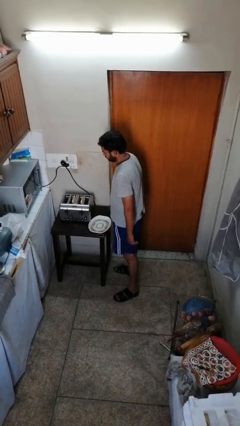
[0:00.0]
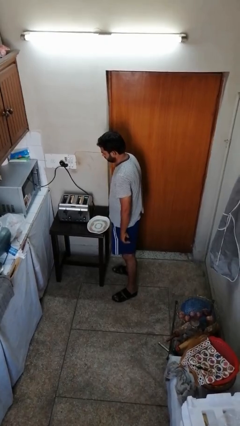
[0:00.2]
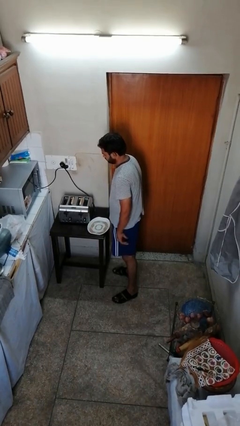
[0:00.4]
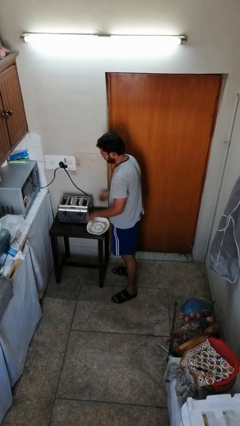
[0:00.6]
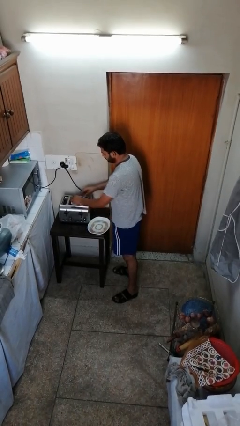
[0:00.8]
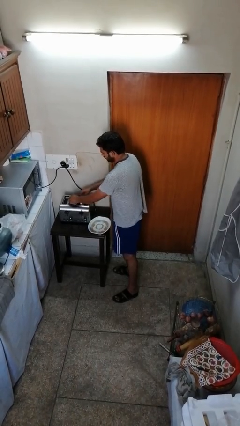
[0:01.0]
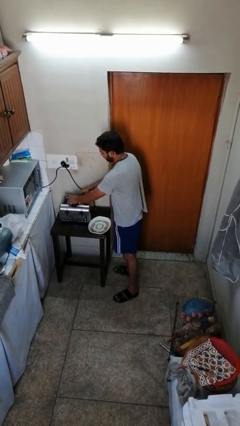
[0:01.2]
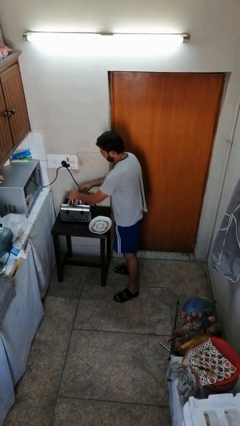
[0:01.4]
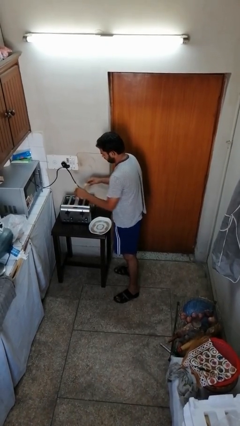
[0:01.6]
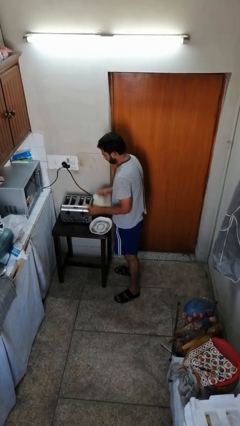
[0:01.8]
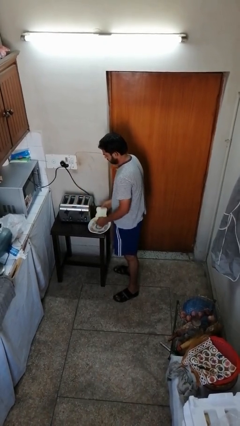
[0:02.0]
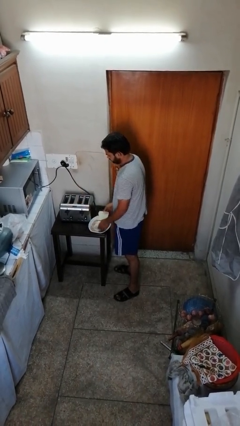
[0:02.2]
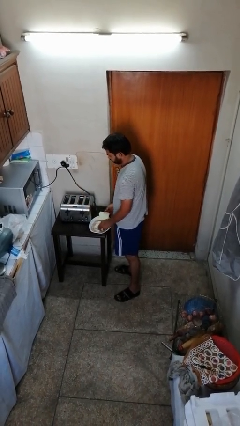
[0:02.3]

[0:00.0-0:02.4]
person takes object from toaster

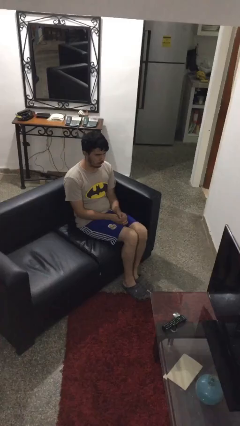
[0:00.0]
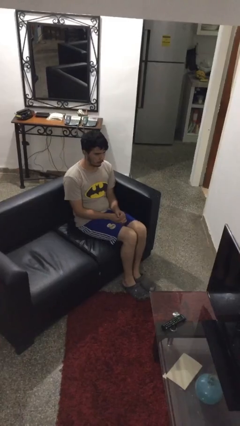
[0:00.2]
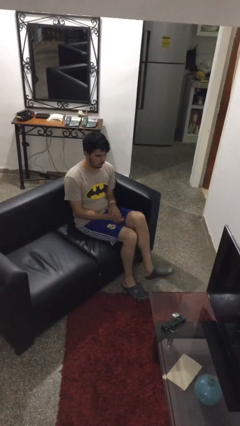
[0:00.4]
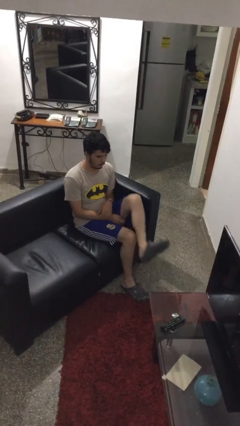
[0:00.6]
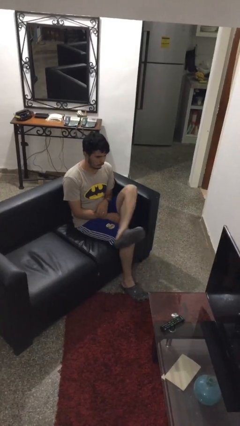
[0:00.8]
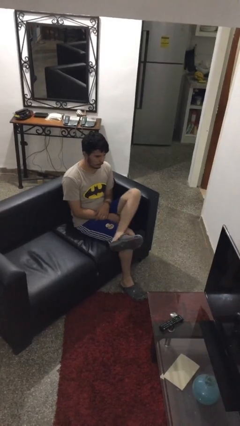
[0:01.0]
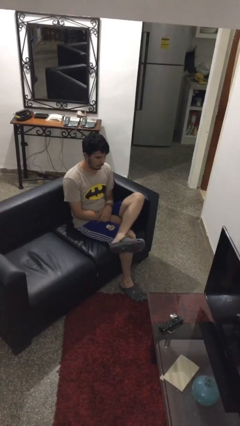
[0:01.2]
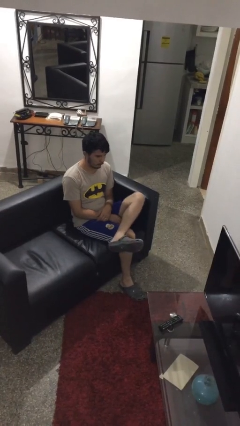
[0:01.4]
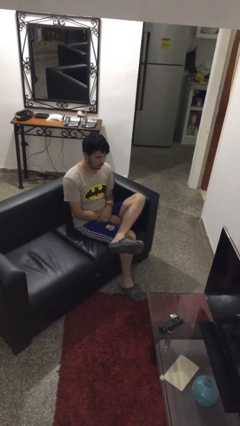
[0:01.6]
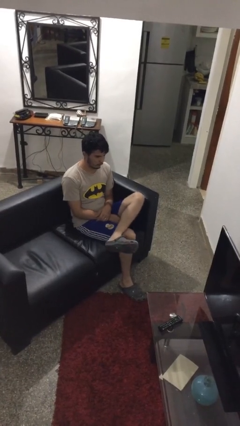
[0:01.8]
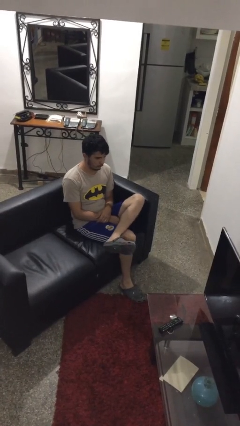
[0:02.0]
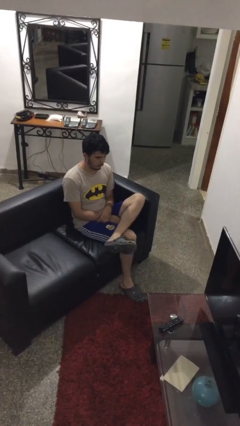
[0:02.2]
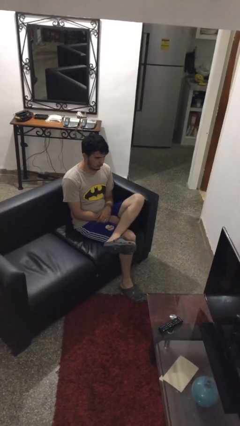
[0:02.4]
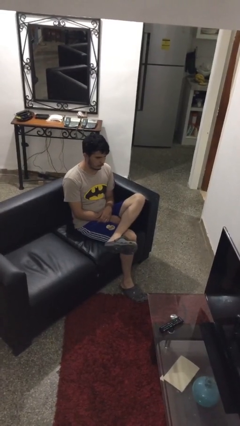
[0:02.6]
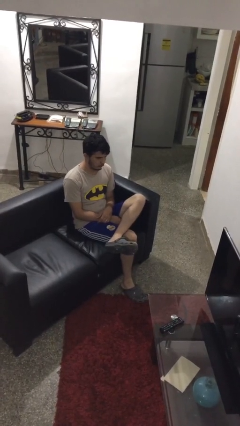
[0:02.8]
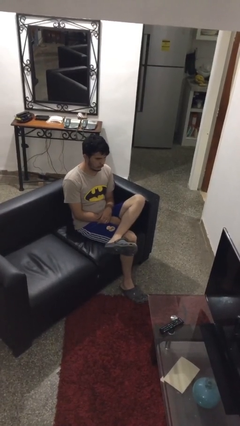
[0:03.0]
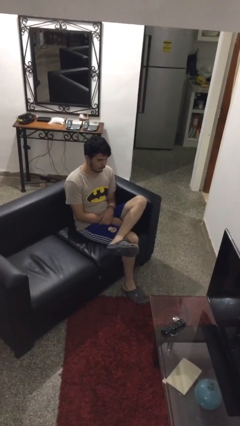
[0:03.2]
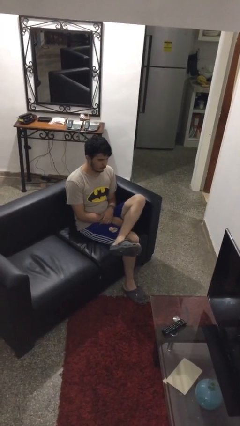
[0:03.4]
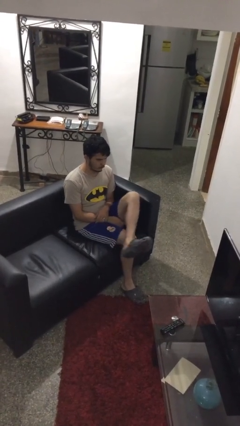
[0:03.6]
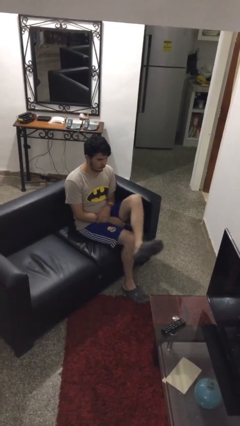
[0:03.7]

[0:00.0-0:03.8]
person crosses legs

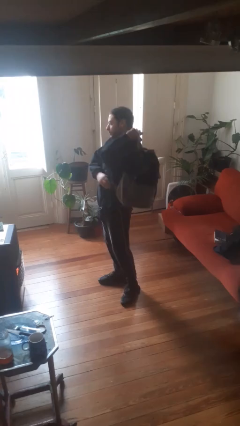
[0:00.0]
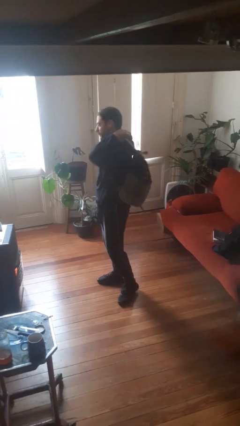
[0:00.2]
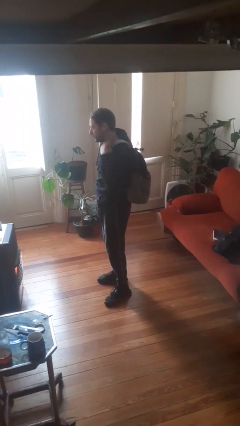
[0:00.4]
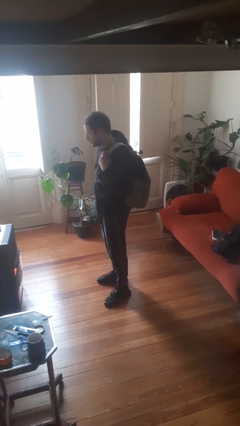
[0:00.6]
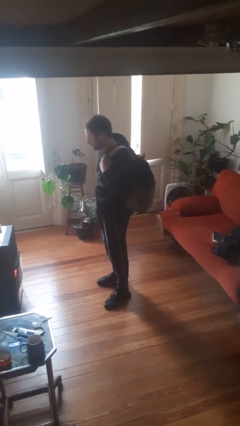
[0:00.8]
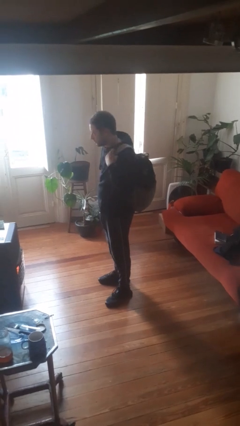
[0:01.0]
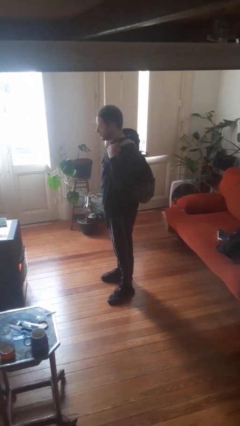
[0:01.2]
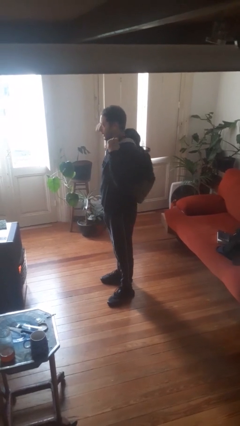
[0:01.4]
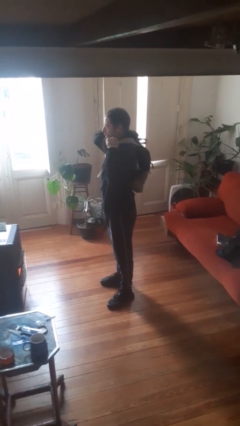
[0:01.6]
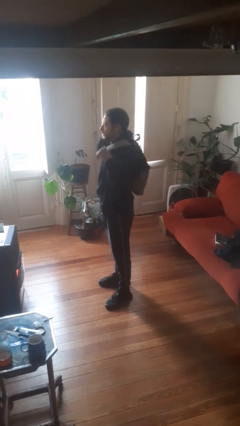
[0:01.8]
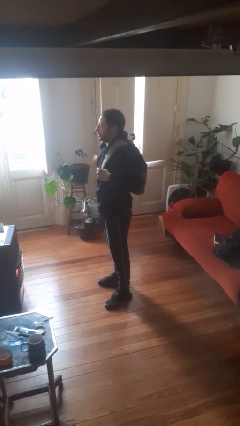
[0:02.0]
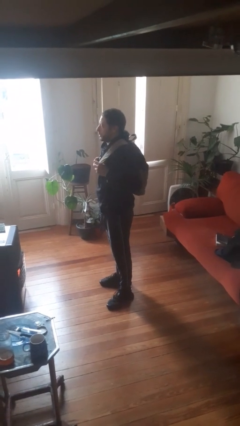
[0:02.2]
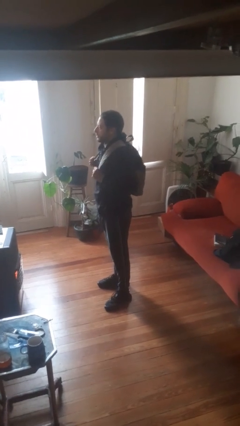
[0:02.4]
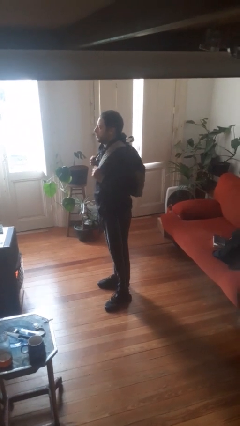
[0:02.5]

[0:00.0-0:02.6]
person puts on backpack

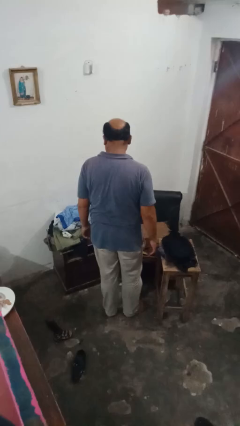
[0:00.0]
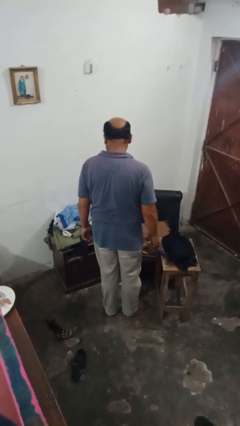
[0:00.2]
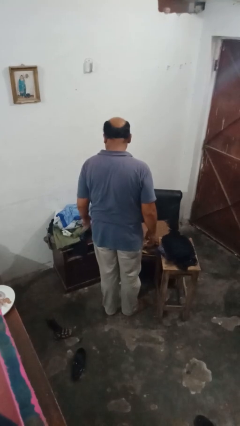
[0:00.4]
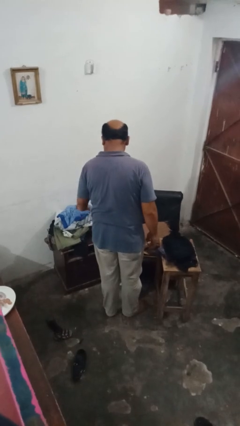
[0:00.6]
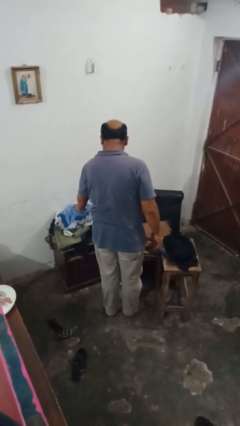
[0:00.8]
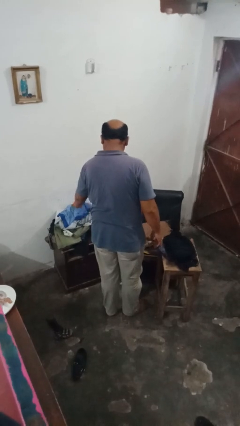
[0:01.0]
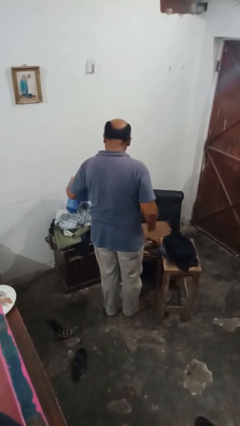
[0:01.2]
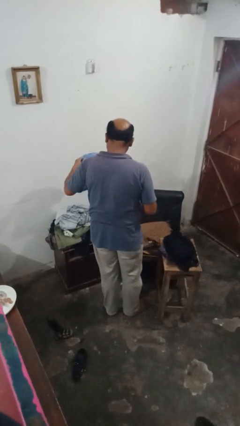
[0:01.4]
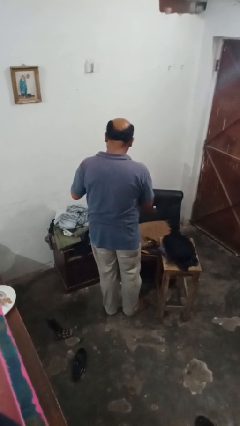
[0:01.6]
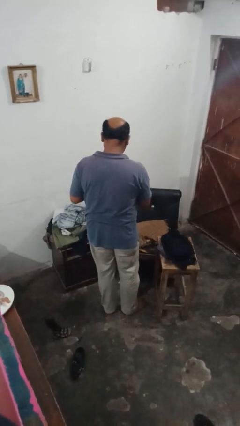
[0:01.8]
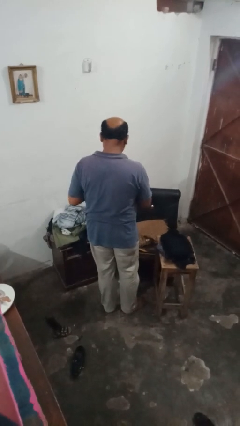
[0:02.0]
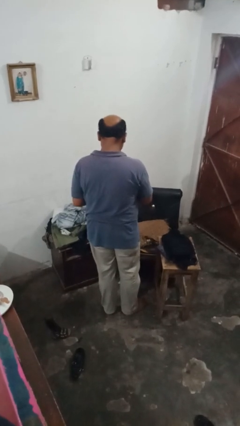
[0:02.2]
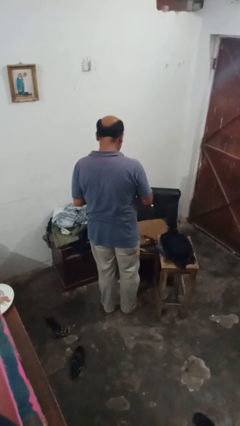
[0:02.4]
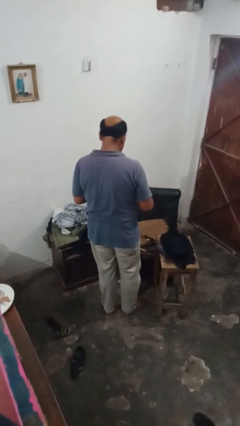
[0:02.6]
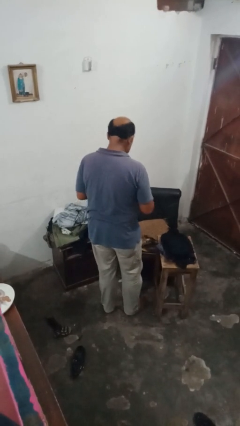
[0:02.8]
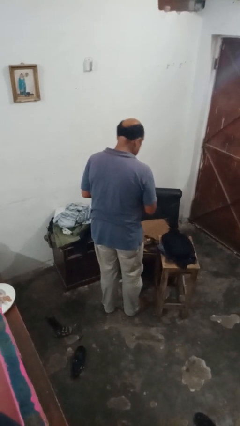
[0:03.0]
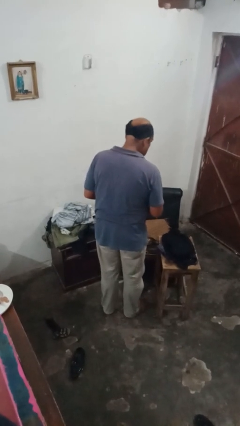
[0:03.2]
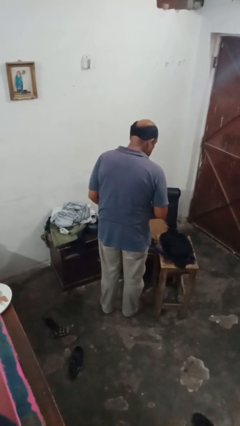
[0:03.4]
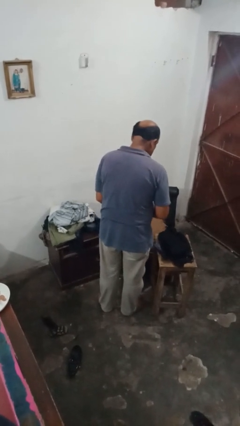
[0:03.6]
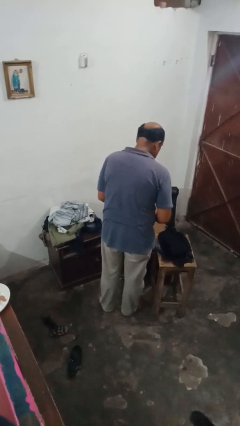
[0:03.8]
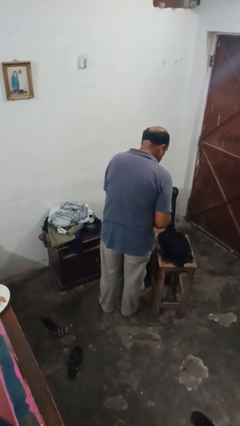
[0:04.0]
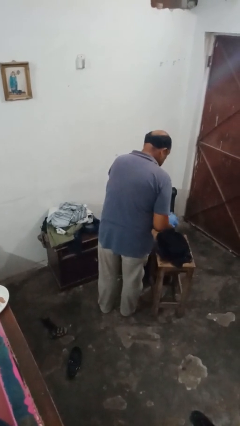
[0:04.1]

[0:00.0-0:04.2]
person folds shirt

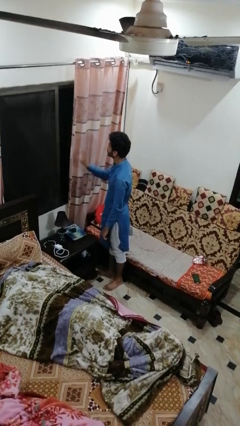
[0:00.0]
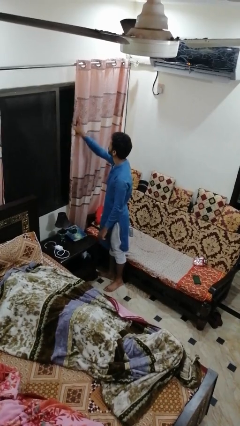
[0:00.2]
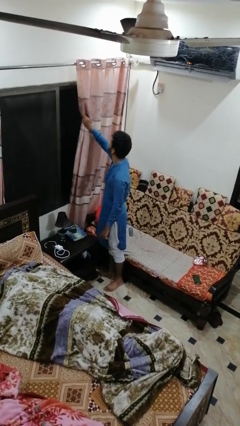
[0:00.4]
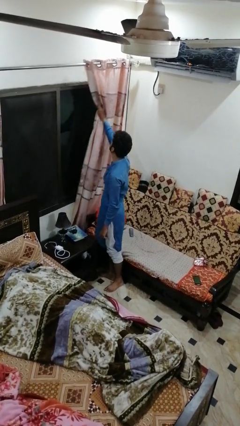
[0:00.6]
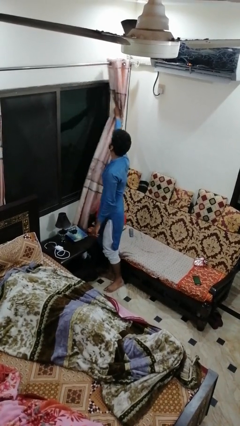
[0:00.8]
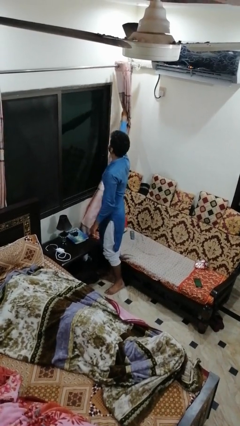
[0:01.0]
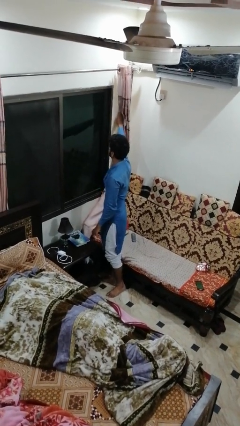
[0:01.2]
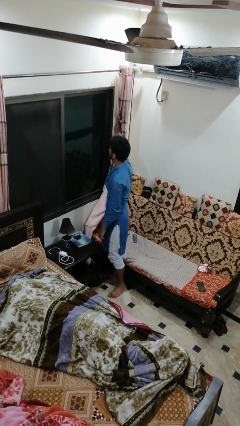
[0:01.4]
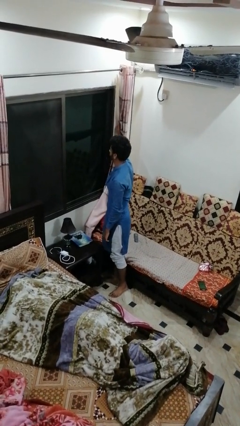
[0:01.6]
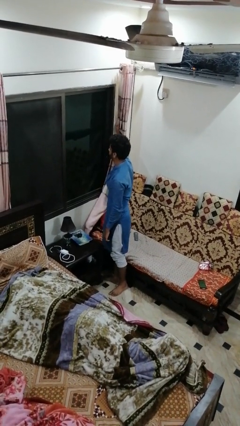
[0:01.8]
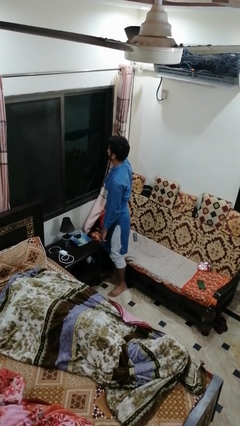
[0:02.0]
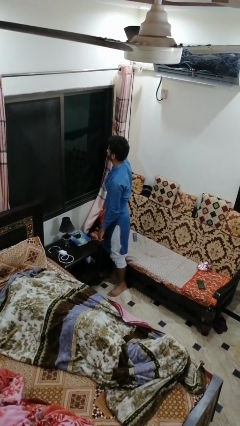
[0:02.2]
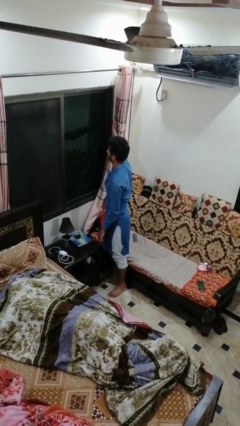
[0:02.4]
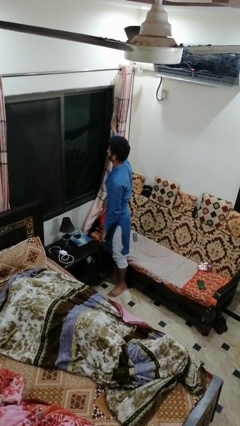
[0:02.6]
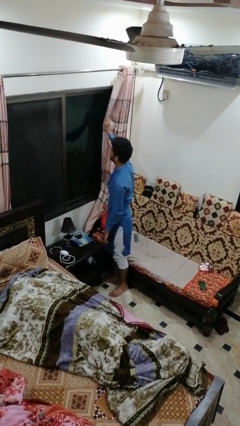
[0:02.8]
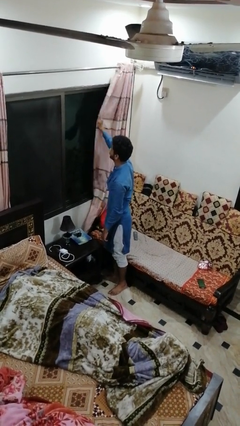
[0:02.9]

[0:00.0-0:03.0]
person opens curtains

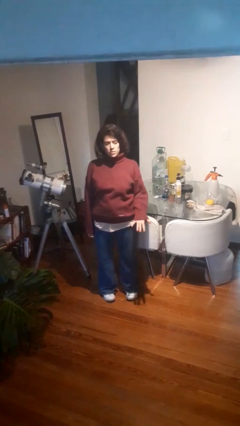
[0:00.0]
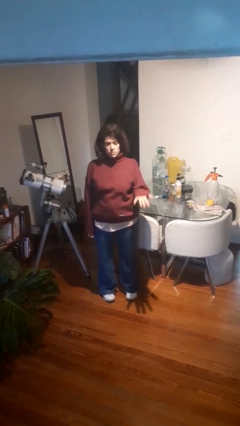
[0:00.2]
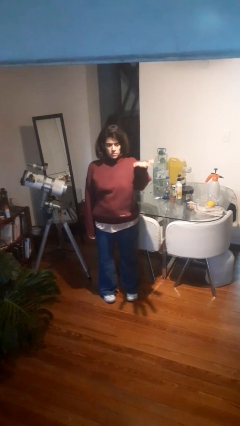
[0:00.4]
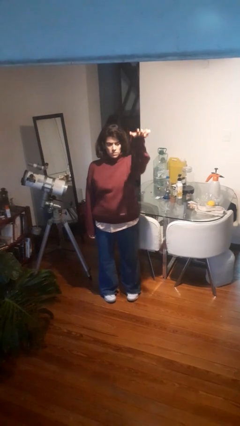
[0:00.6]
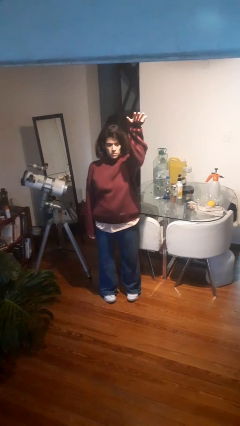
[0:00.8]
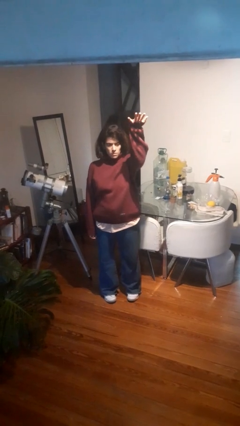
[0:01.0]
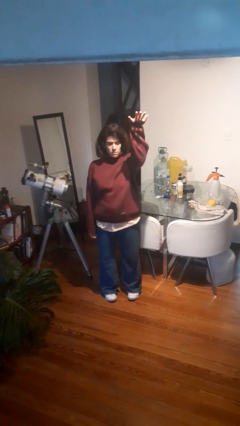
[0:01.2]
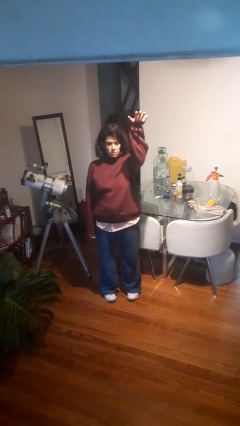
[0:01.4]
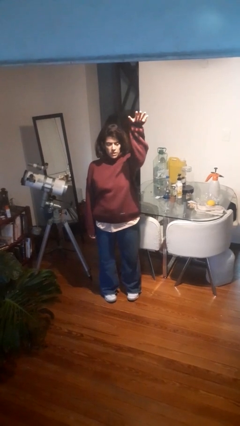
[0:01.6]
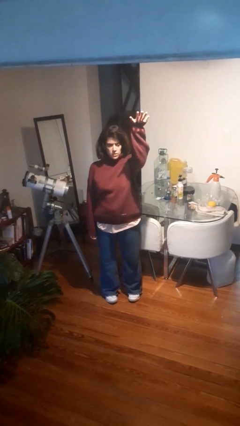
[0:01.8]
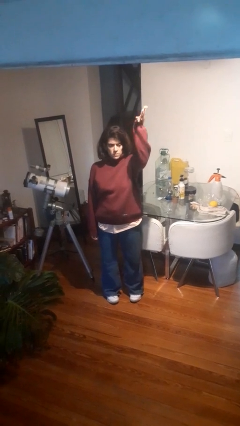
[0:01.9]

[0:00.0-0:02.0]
person gestures swipe up
